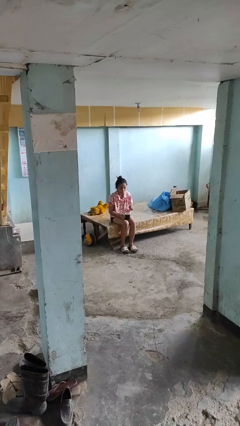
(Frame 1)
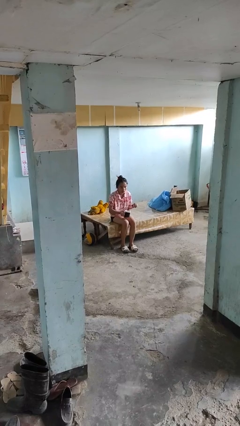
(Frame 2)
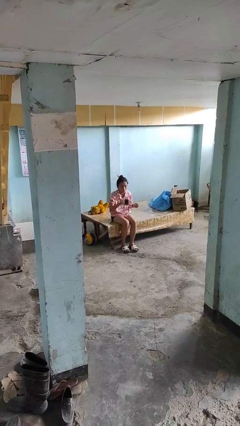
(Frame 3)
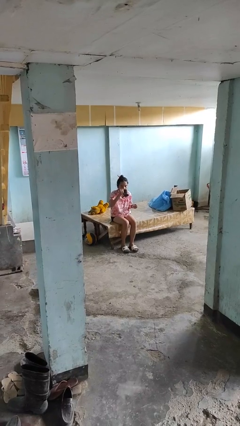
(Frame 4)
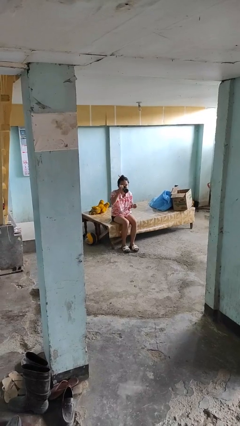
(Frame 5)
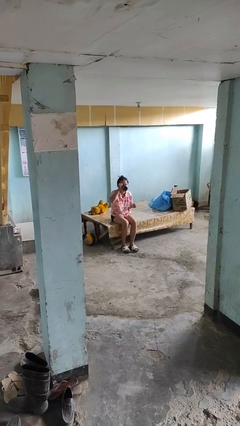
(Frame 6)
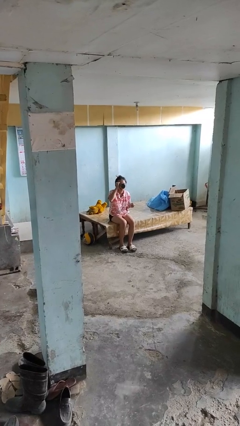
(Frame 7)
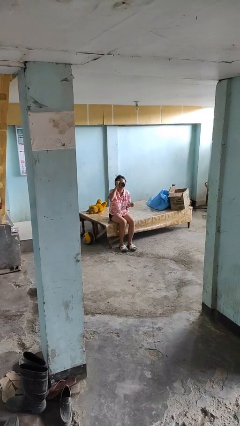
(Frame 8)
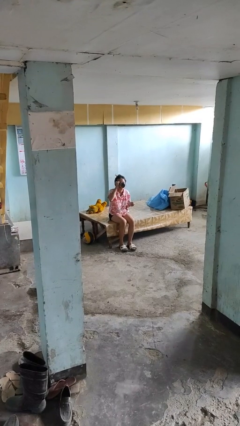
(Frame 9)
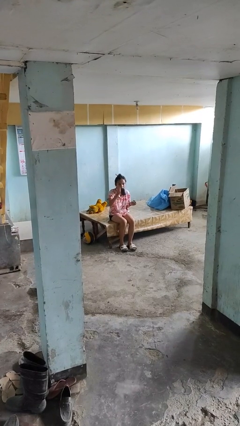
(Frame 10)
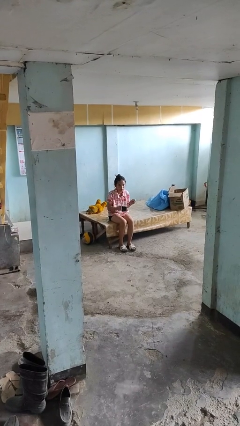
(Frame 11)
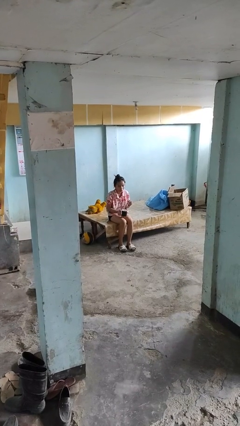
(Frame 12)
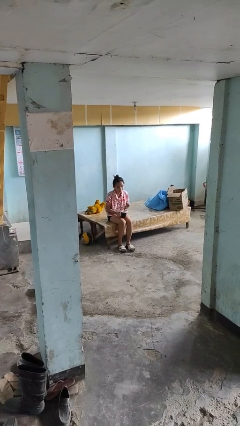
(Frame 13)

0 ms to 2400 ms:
person drinks from mug

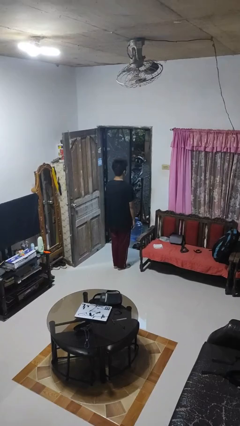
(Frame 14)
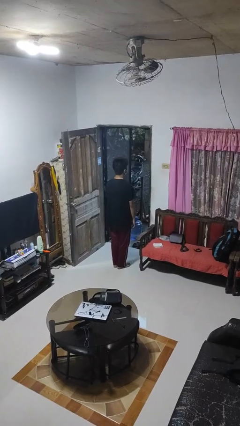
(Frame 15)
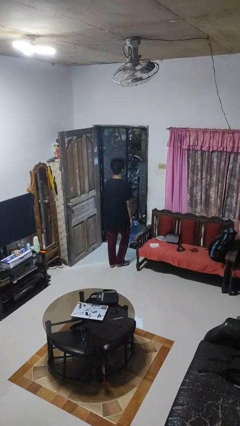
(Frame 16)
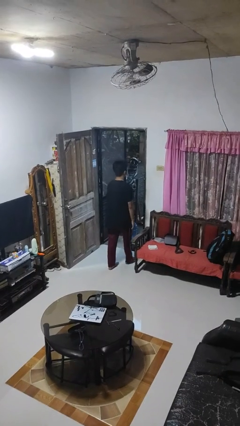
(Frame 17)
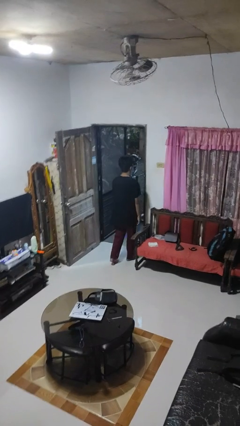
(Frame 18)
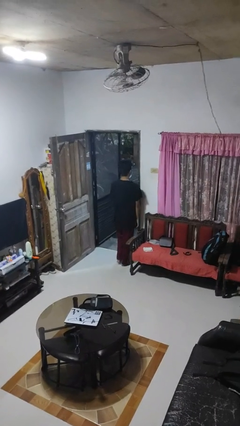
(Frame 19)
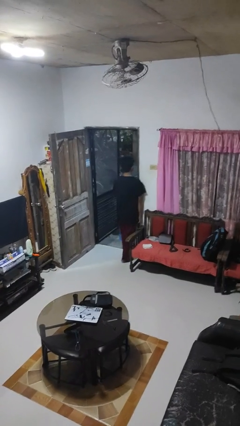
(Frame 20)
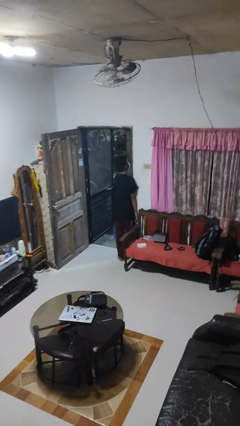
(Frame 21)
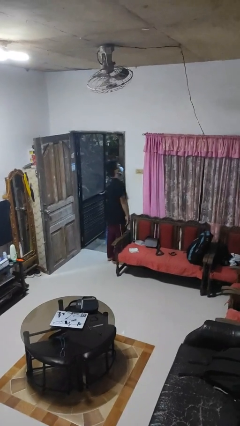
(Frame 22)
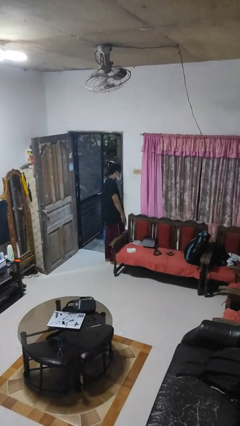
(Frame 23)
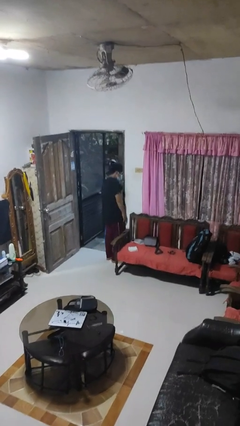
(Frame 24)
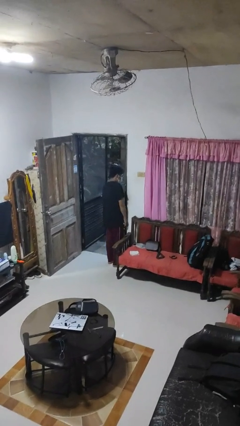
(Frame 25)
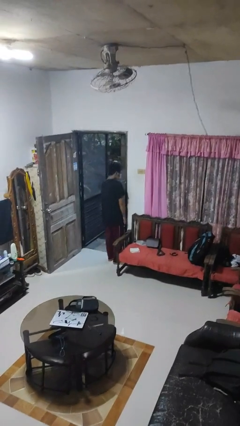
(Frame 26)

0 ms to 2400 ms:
person bumps into wall

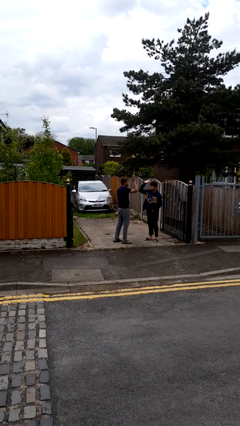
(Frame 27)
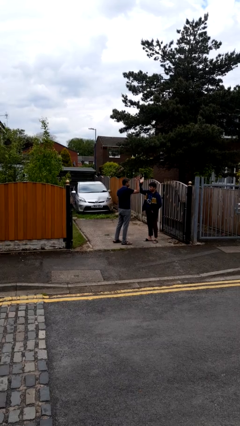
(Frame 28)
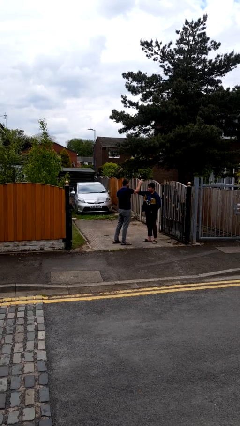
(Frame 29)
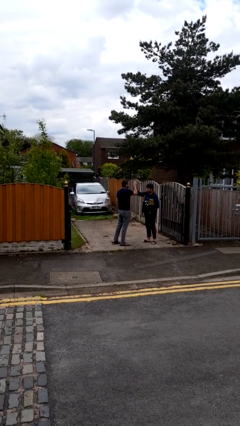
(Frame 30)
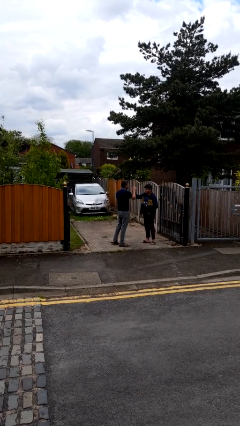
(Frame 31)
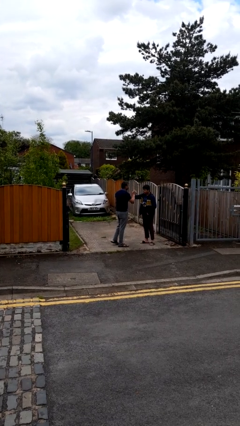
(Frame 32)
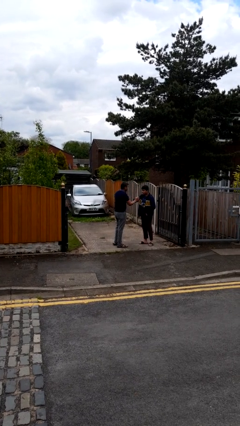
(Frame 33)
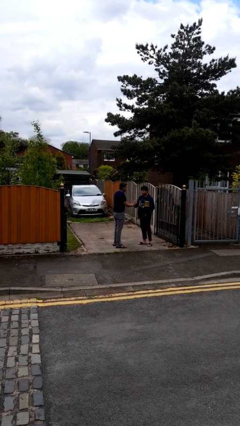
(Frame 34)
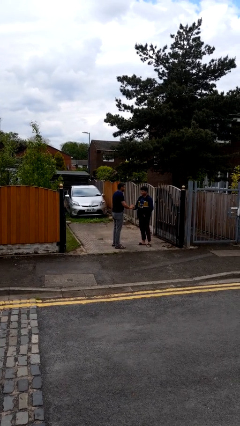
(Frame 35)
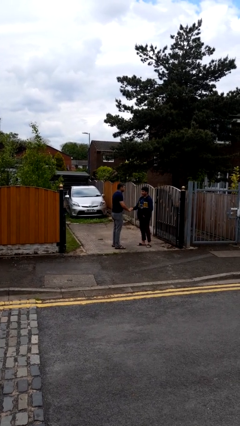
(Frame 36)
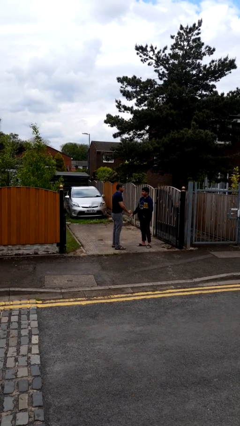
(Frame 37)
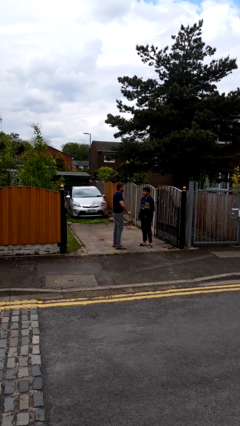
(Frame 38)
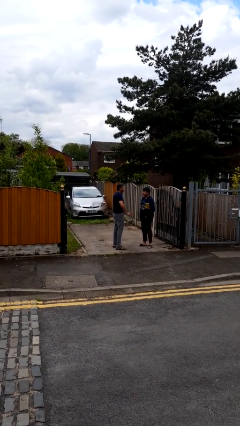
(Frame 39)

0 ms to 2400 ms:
person highfives hand

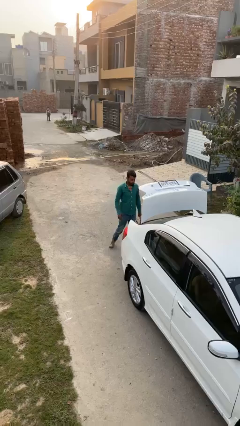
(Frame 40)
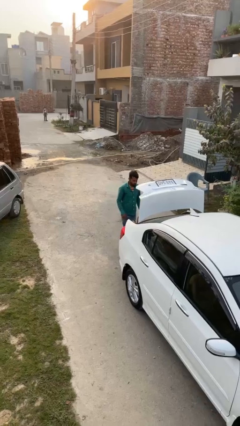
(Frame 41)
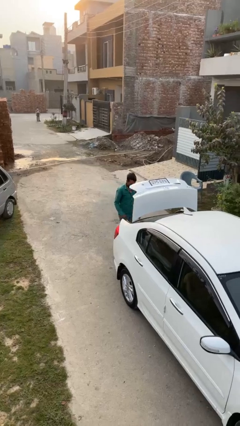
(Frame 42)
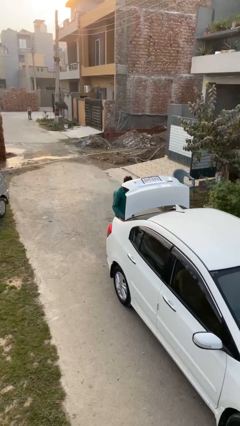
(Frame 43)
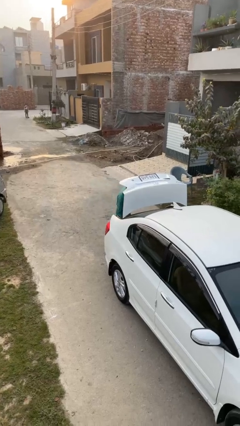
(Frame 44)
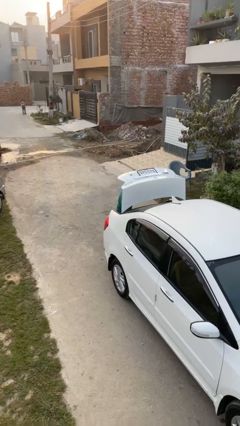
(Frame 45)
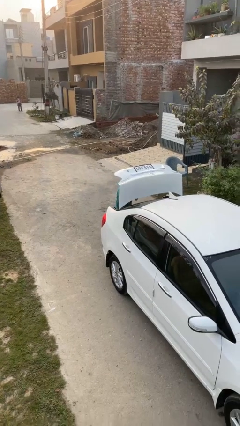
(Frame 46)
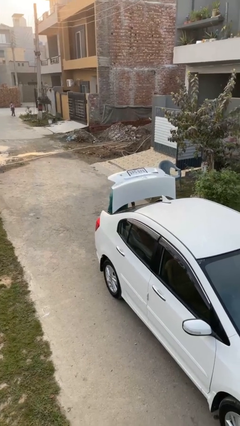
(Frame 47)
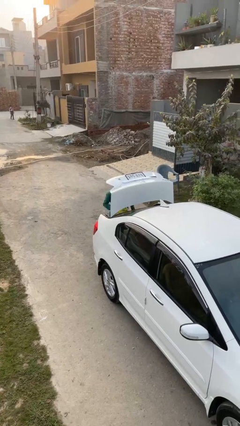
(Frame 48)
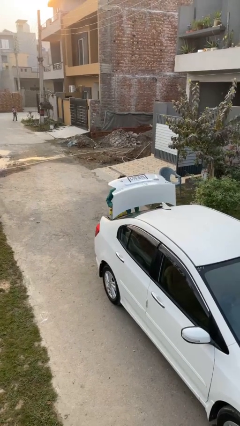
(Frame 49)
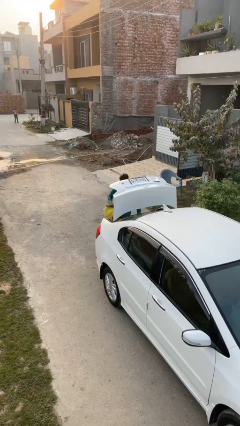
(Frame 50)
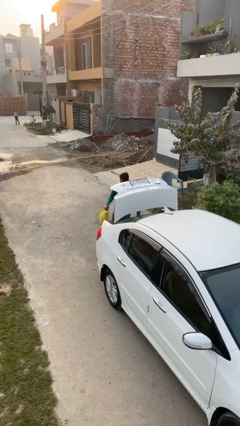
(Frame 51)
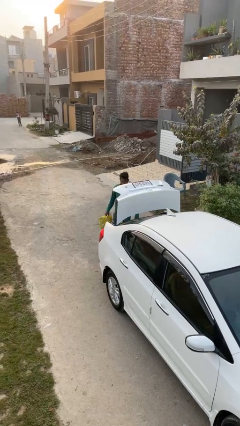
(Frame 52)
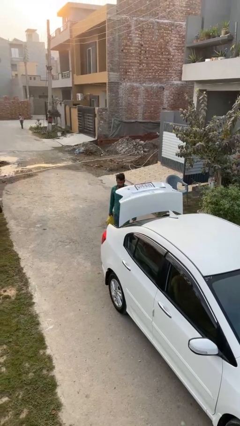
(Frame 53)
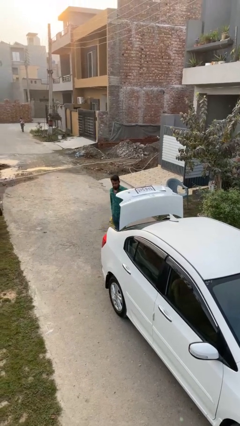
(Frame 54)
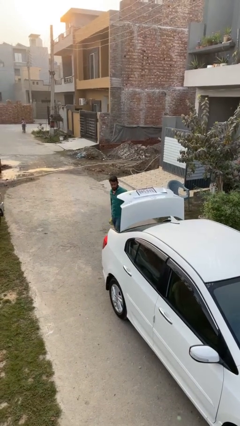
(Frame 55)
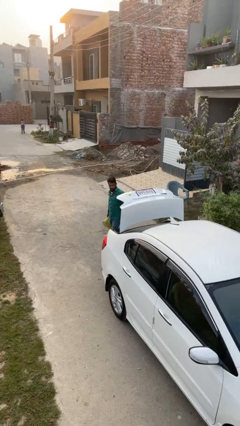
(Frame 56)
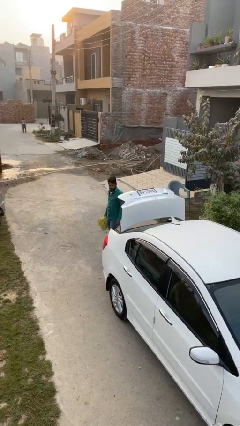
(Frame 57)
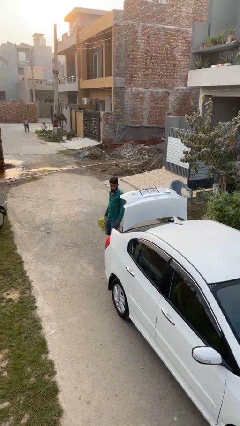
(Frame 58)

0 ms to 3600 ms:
person unloads car

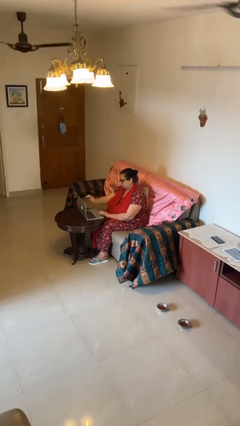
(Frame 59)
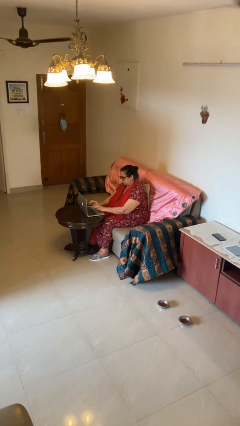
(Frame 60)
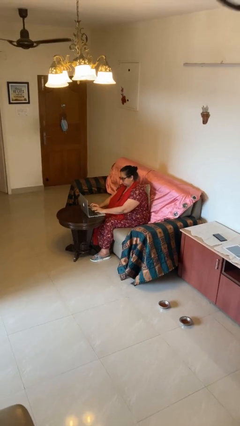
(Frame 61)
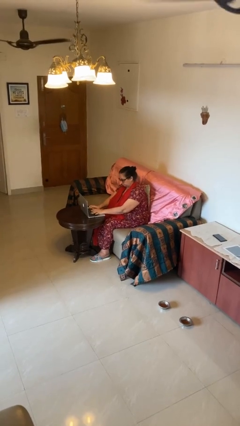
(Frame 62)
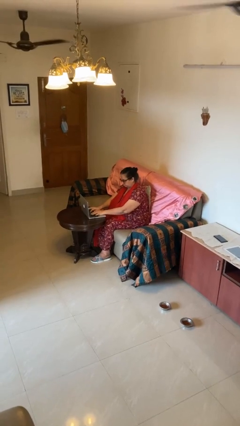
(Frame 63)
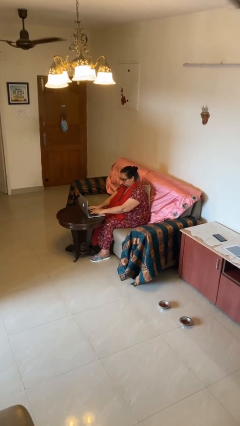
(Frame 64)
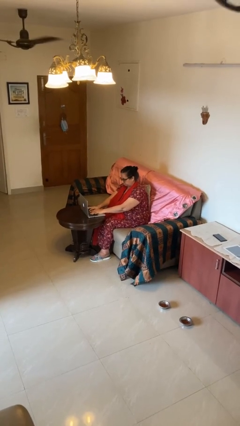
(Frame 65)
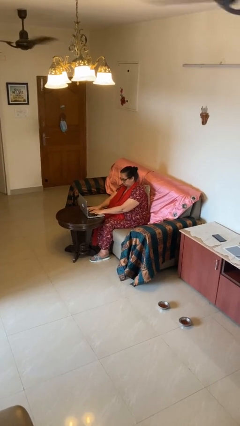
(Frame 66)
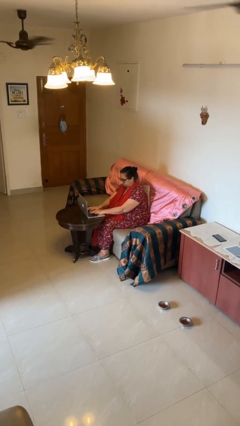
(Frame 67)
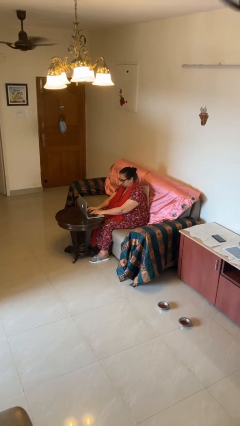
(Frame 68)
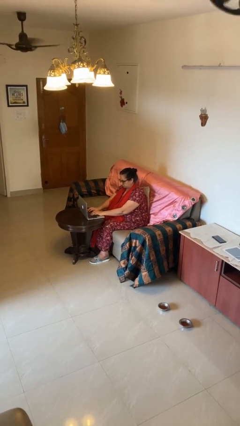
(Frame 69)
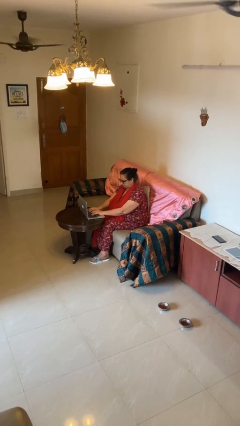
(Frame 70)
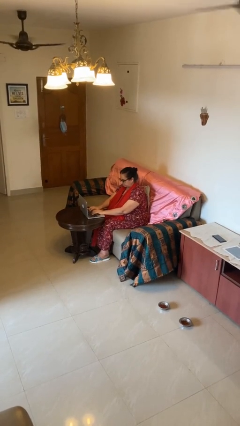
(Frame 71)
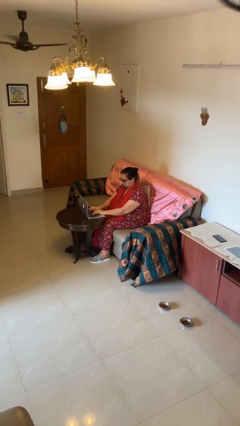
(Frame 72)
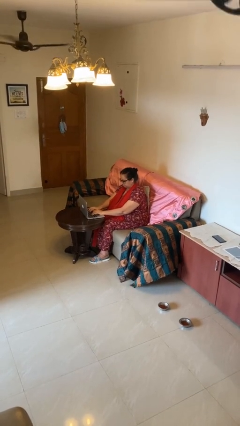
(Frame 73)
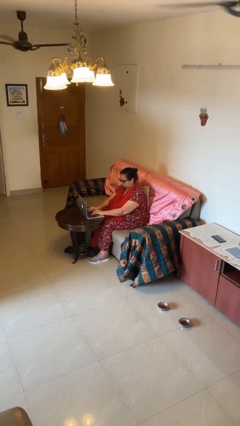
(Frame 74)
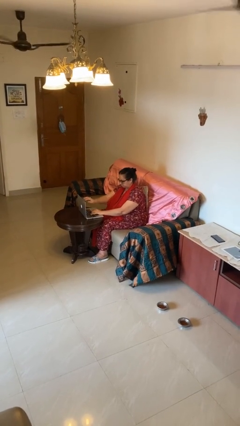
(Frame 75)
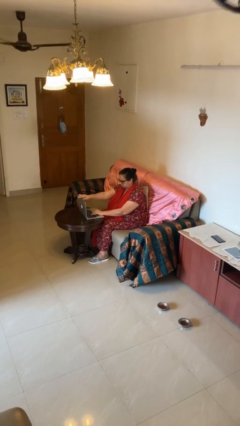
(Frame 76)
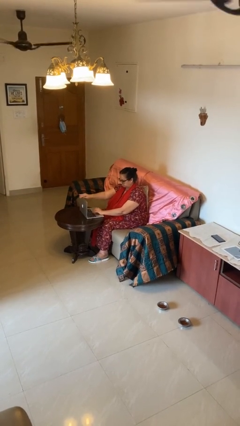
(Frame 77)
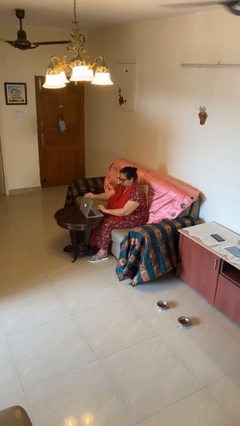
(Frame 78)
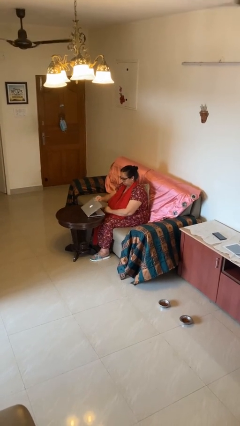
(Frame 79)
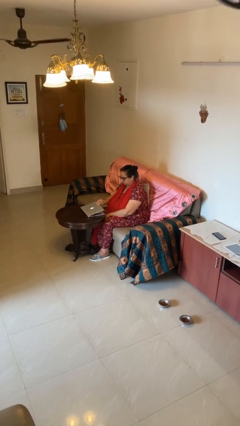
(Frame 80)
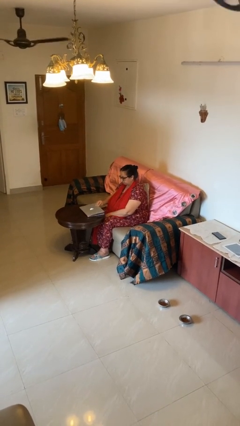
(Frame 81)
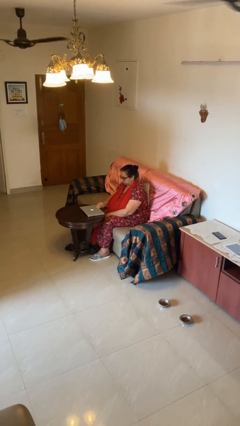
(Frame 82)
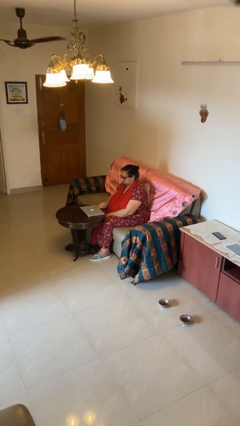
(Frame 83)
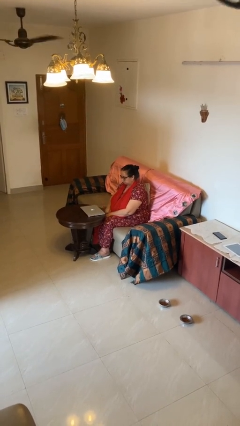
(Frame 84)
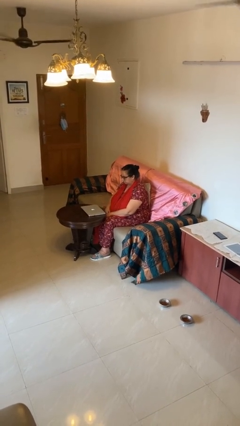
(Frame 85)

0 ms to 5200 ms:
person interacts with laptop

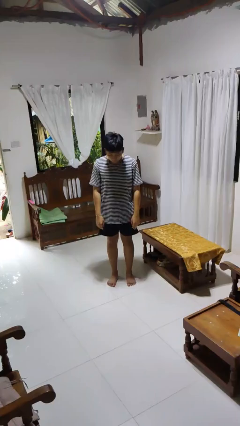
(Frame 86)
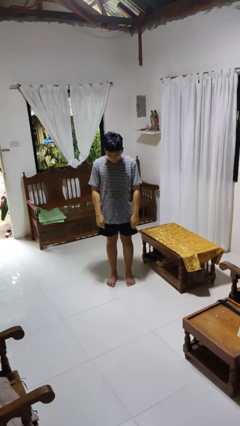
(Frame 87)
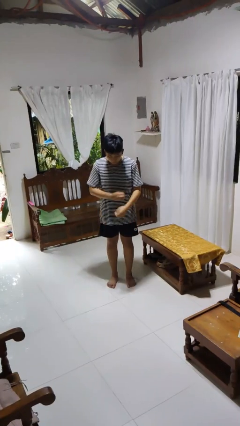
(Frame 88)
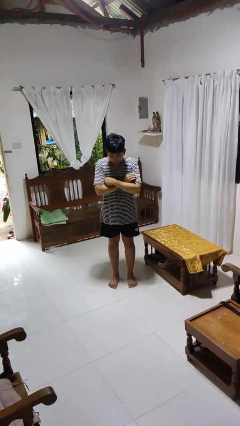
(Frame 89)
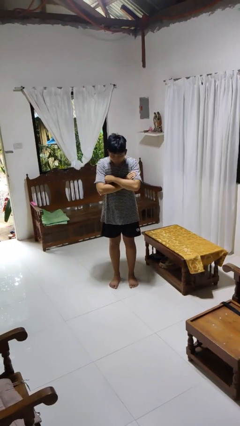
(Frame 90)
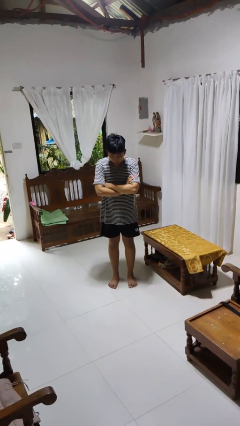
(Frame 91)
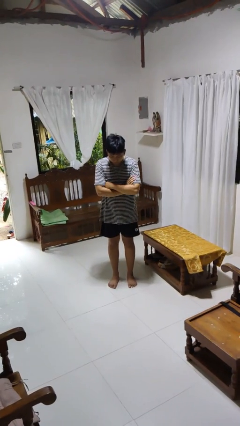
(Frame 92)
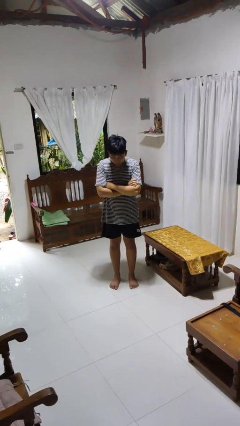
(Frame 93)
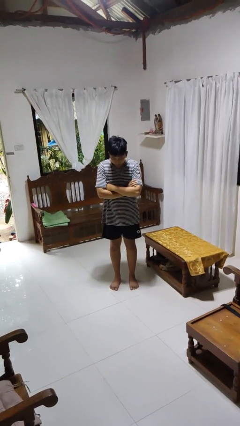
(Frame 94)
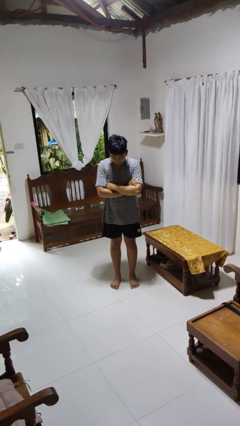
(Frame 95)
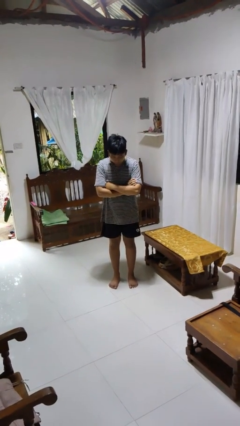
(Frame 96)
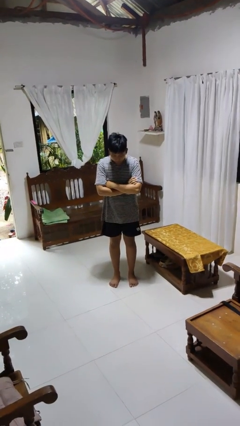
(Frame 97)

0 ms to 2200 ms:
person gestures arms x
